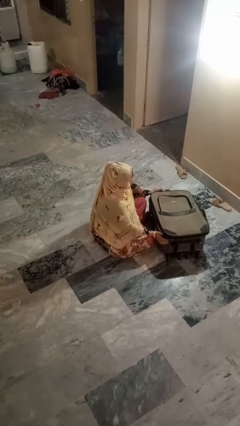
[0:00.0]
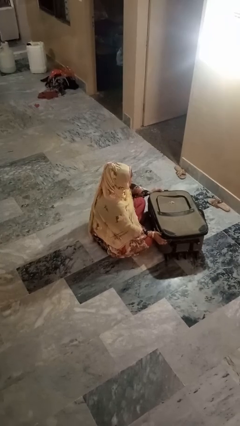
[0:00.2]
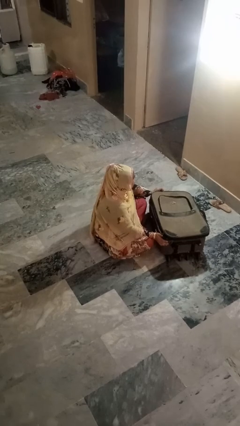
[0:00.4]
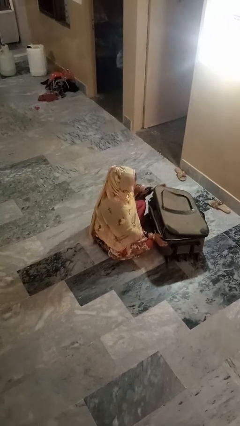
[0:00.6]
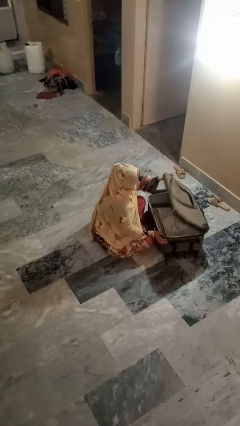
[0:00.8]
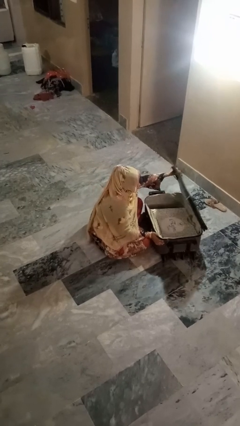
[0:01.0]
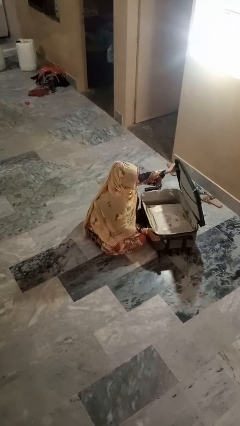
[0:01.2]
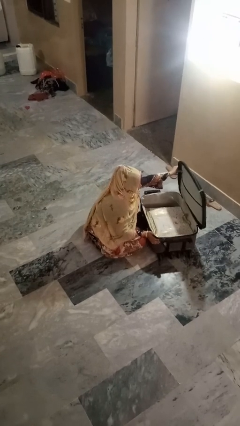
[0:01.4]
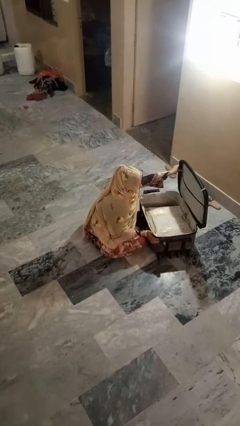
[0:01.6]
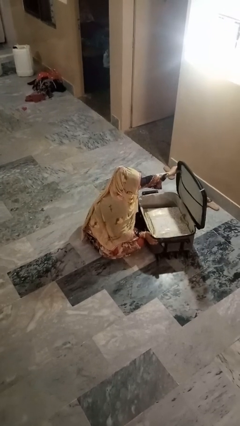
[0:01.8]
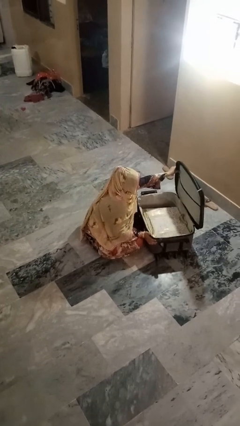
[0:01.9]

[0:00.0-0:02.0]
person opens suitcase

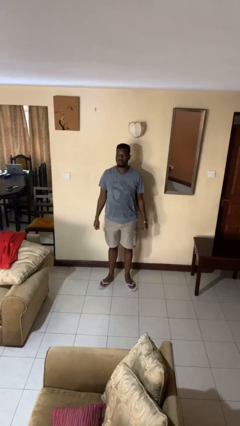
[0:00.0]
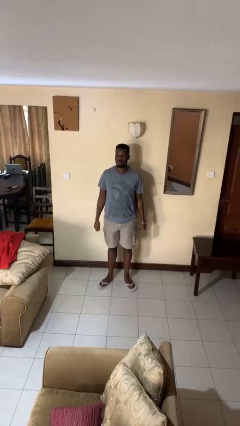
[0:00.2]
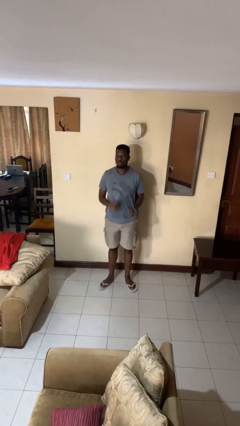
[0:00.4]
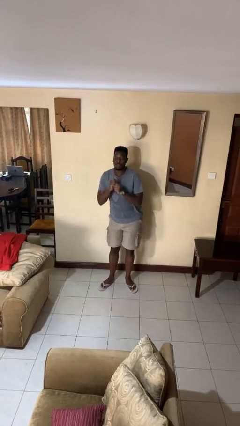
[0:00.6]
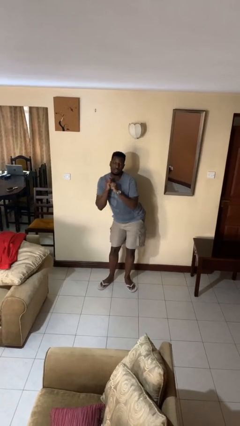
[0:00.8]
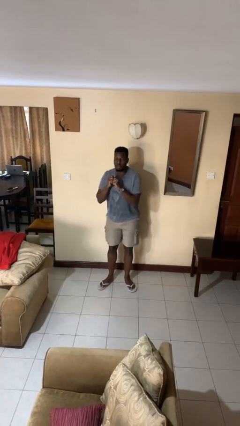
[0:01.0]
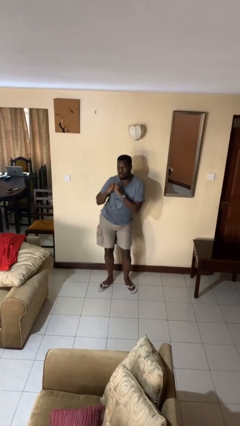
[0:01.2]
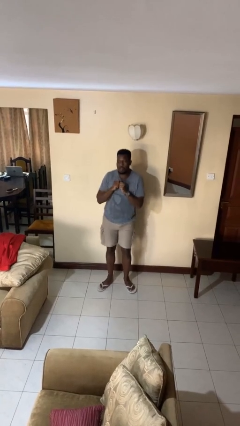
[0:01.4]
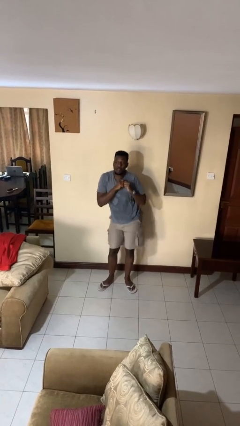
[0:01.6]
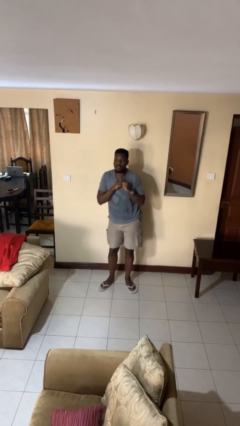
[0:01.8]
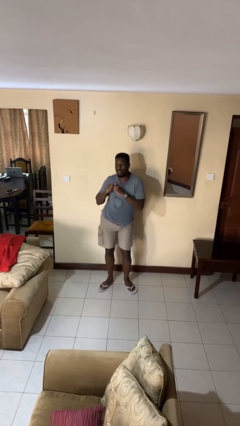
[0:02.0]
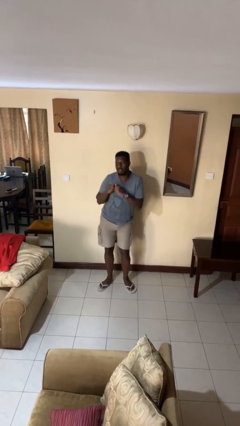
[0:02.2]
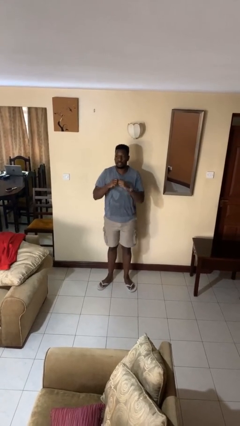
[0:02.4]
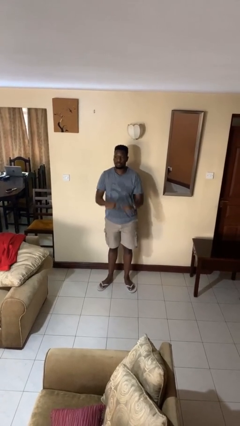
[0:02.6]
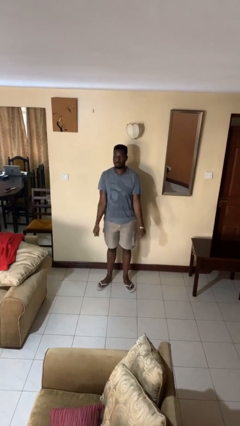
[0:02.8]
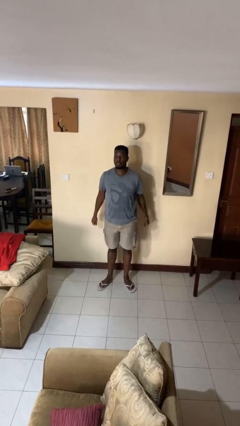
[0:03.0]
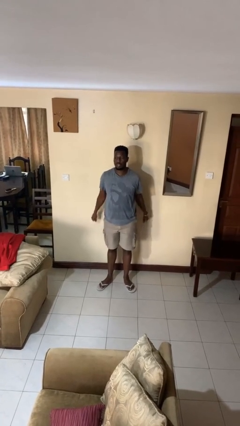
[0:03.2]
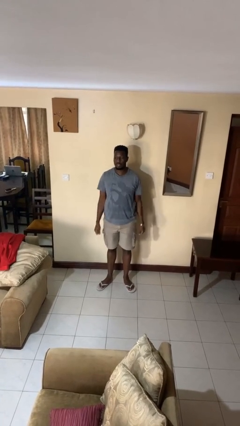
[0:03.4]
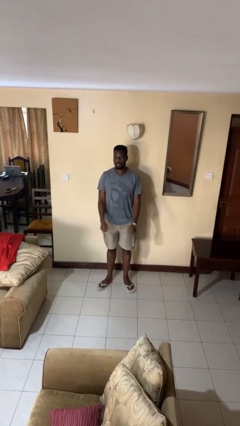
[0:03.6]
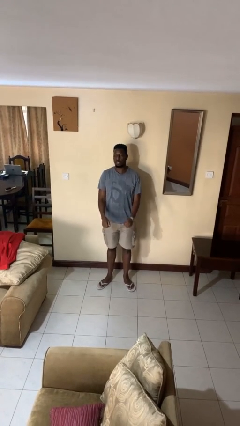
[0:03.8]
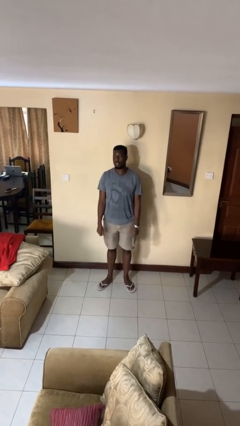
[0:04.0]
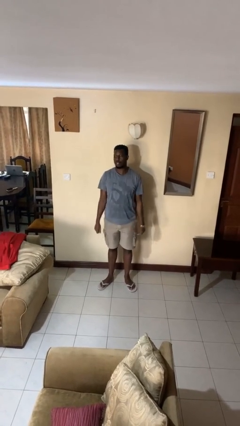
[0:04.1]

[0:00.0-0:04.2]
person wiggles hips

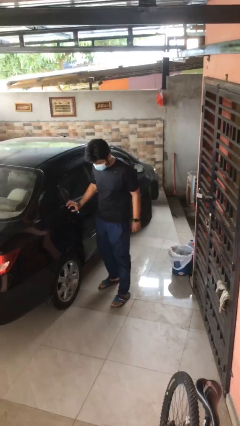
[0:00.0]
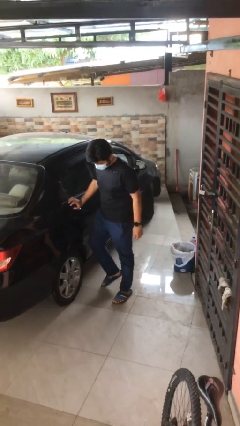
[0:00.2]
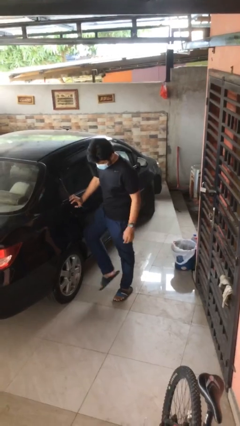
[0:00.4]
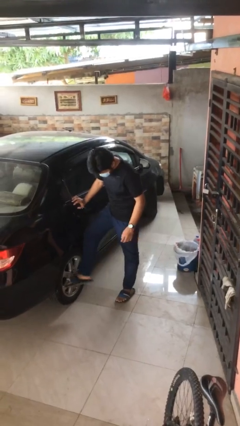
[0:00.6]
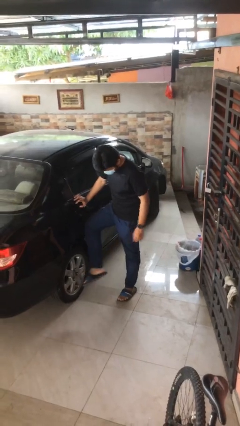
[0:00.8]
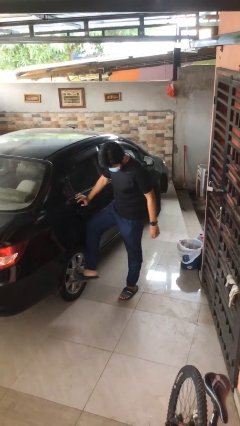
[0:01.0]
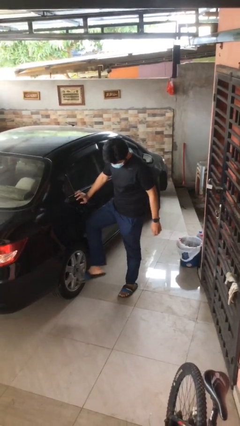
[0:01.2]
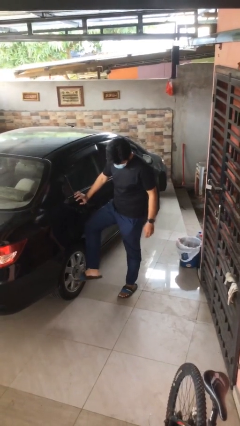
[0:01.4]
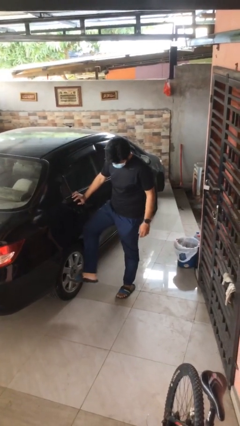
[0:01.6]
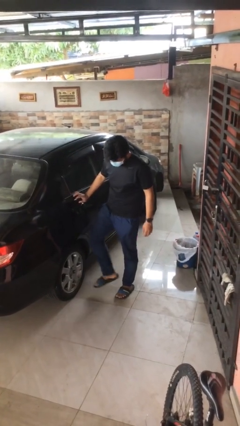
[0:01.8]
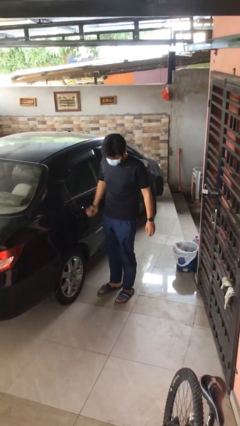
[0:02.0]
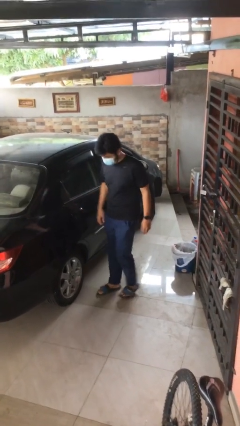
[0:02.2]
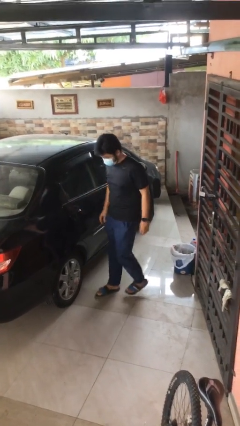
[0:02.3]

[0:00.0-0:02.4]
person kicks car tires

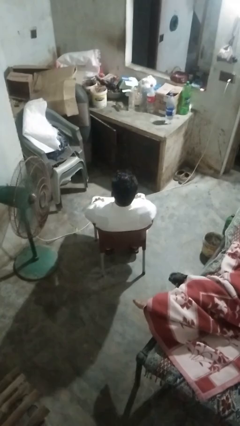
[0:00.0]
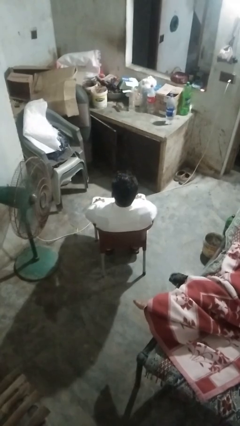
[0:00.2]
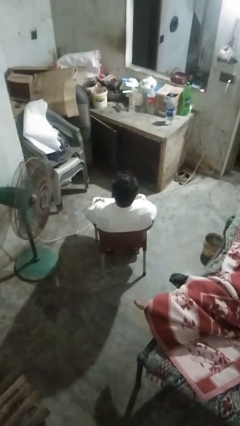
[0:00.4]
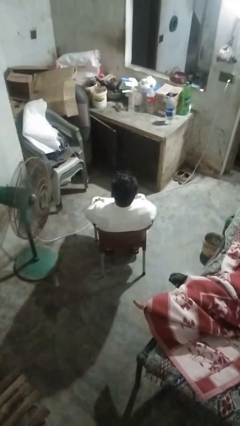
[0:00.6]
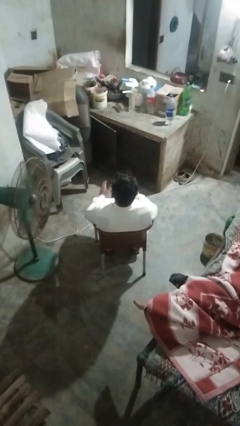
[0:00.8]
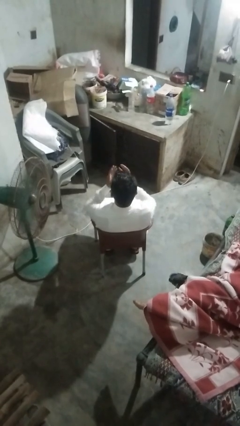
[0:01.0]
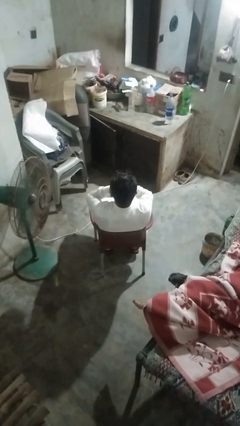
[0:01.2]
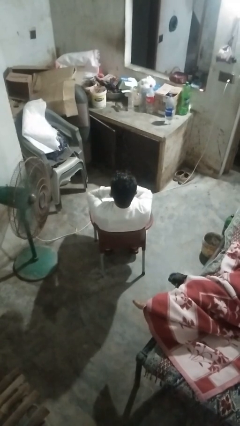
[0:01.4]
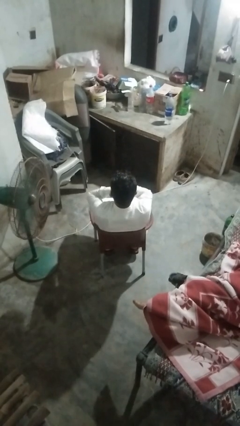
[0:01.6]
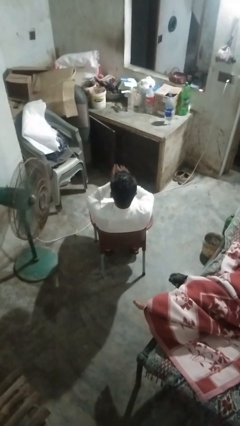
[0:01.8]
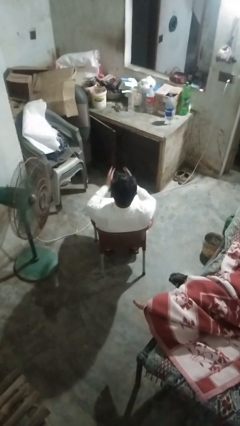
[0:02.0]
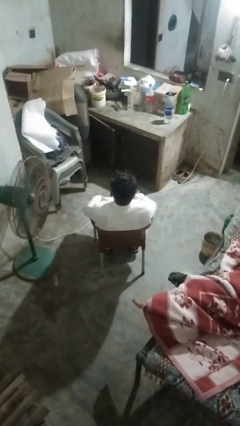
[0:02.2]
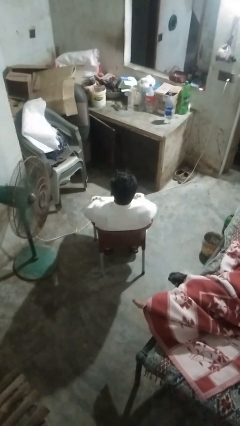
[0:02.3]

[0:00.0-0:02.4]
person yawns

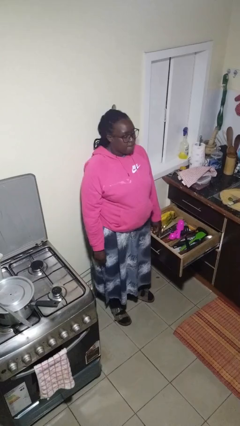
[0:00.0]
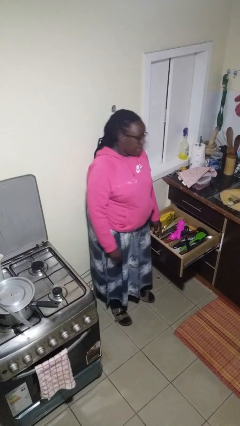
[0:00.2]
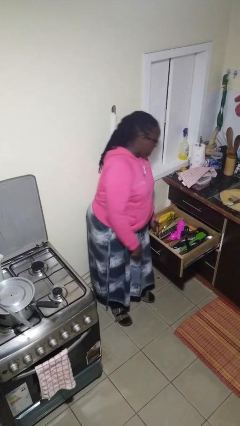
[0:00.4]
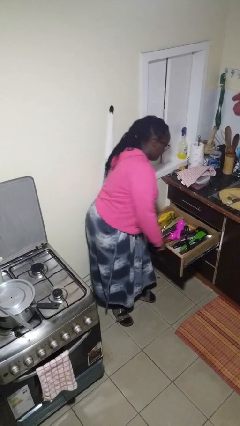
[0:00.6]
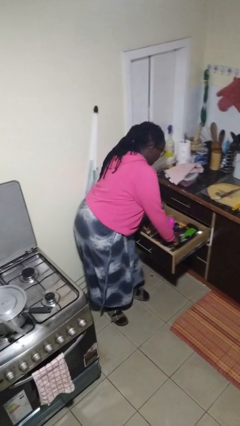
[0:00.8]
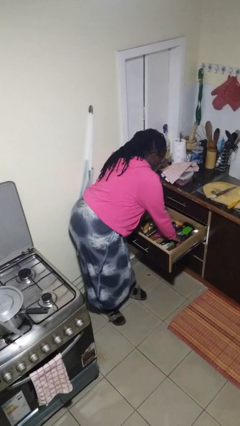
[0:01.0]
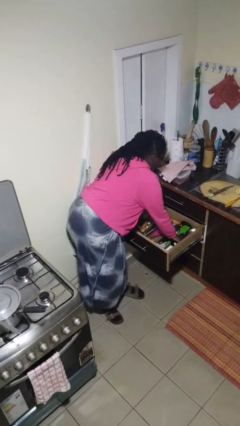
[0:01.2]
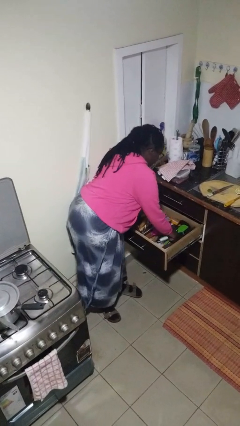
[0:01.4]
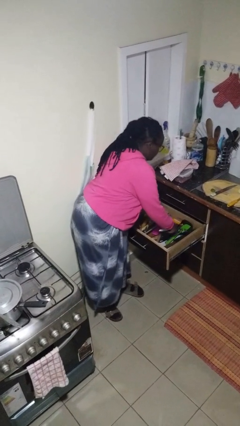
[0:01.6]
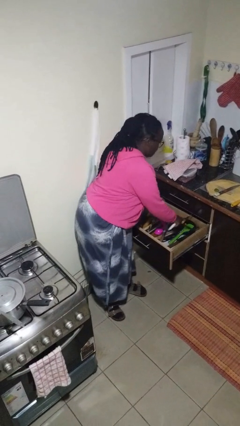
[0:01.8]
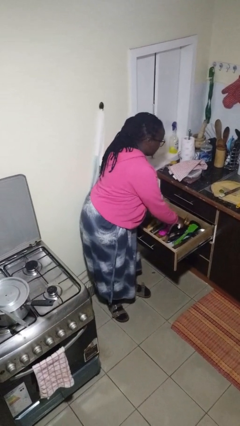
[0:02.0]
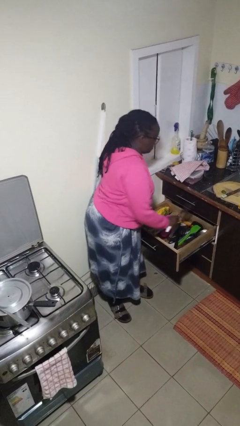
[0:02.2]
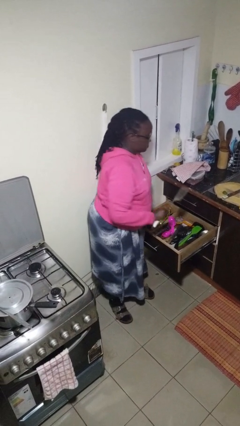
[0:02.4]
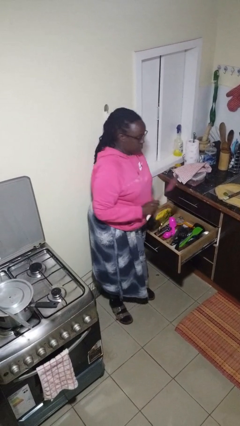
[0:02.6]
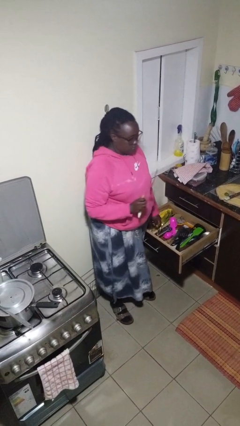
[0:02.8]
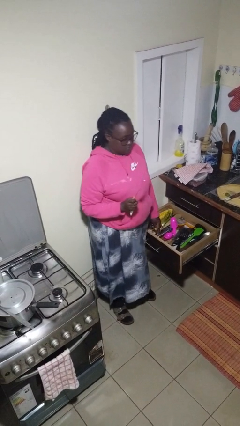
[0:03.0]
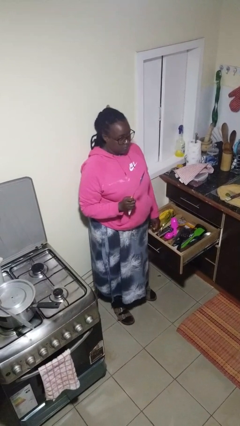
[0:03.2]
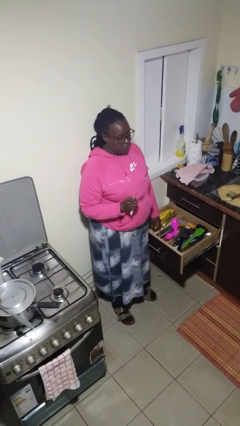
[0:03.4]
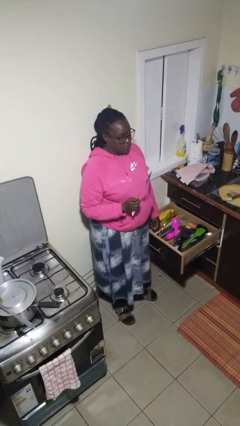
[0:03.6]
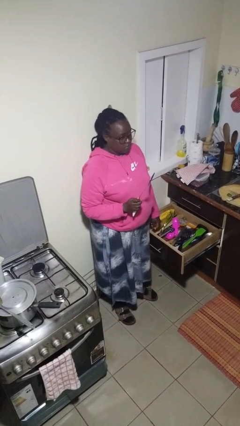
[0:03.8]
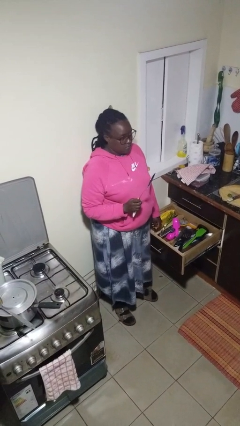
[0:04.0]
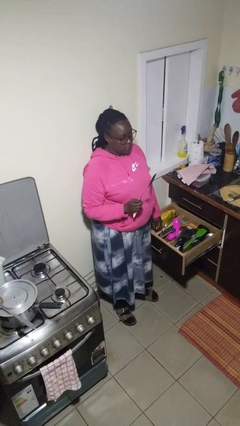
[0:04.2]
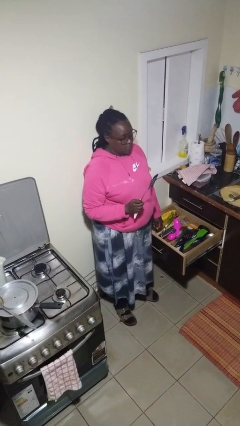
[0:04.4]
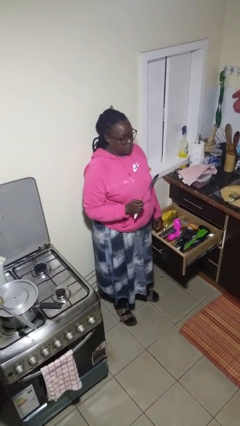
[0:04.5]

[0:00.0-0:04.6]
person takes object from kitchen drawer

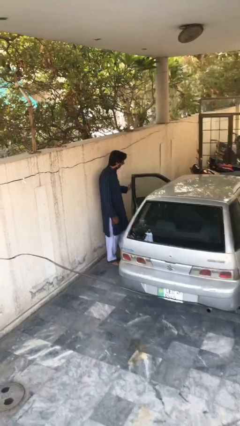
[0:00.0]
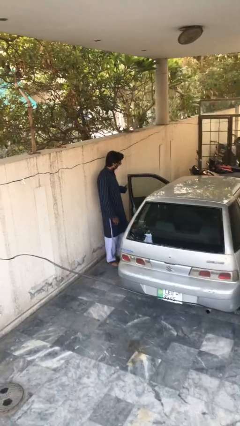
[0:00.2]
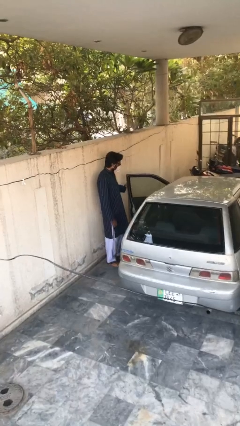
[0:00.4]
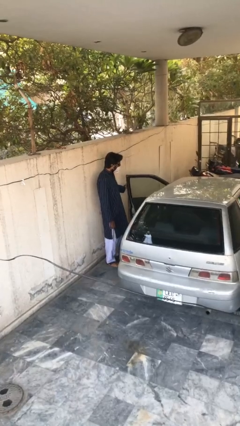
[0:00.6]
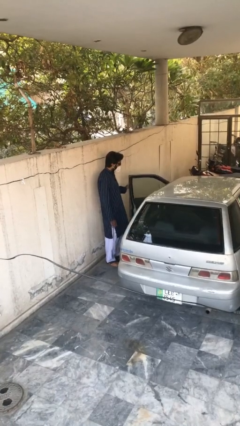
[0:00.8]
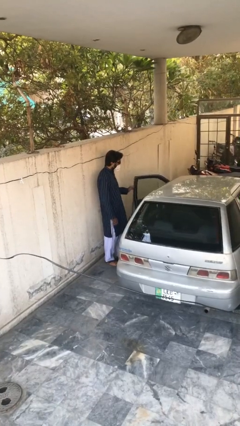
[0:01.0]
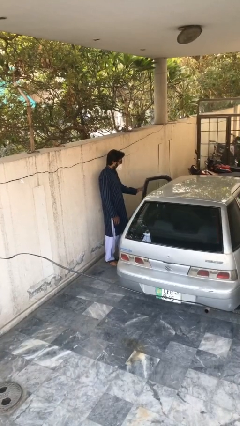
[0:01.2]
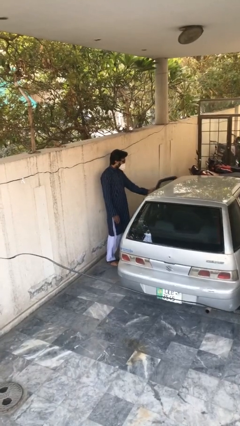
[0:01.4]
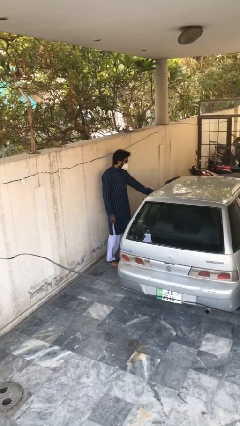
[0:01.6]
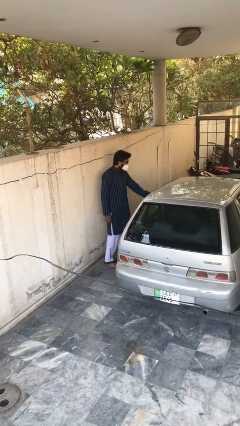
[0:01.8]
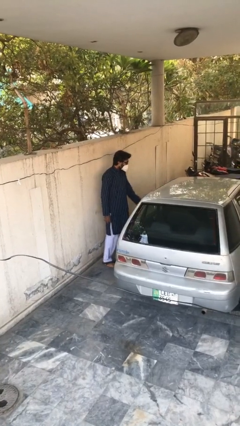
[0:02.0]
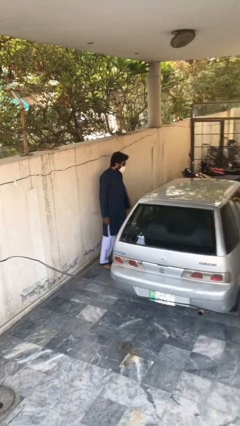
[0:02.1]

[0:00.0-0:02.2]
person closes car door
